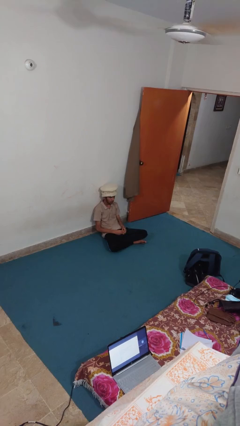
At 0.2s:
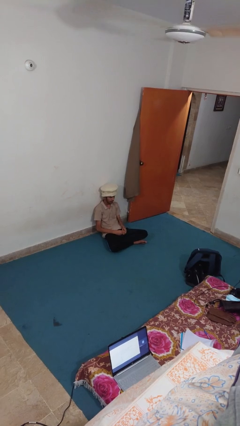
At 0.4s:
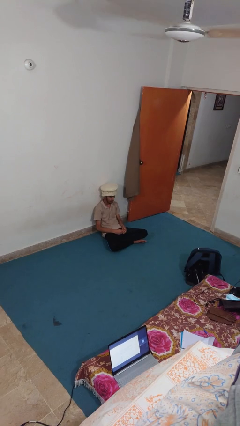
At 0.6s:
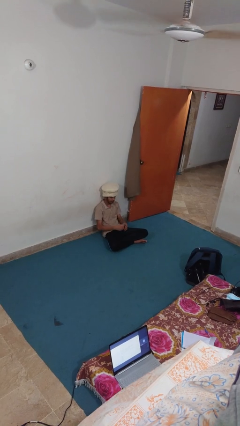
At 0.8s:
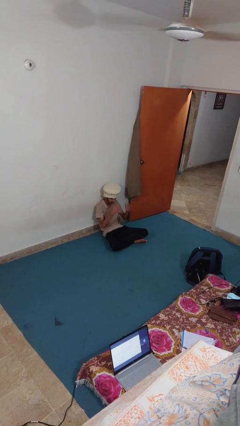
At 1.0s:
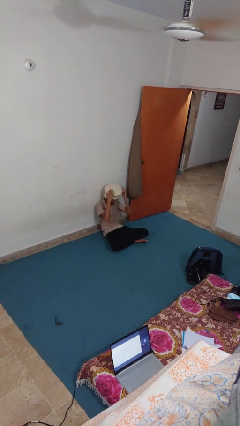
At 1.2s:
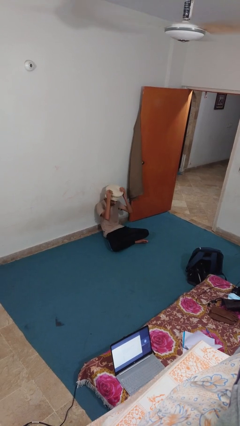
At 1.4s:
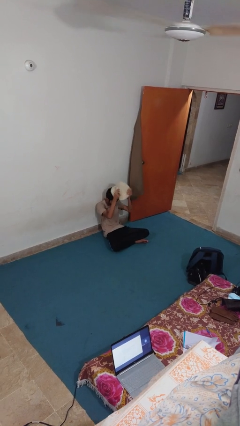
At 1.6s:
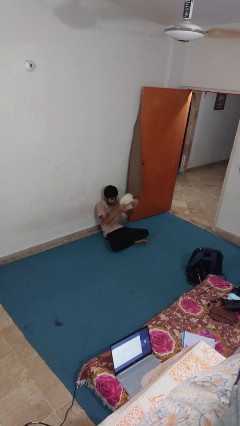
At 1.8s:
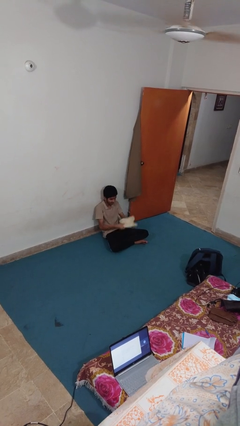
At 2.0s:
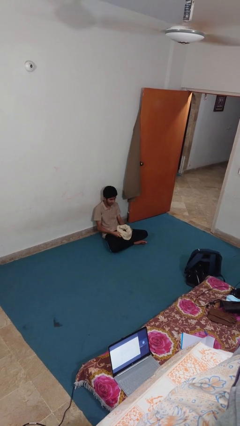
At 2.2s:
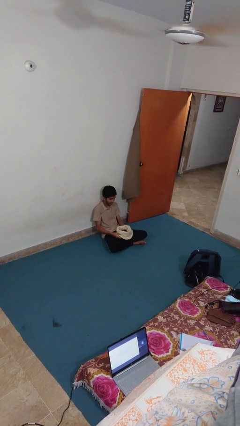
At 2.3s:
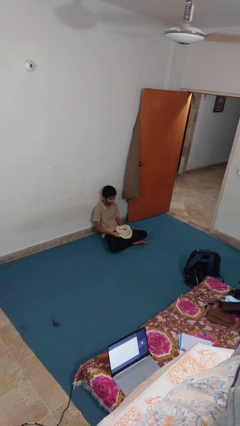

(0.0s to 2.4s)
person takes off hat

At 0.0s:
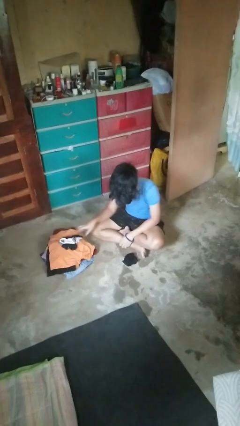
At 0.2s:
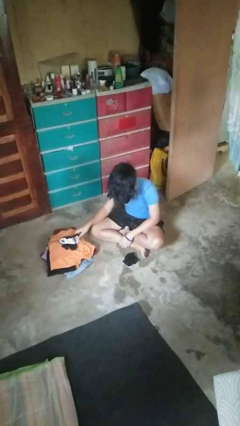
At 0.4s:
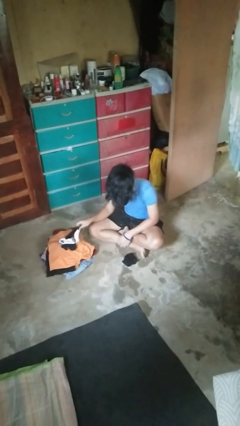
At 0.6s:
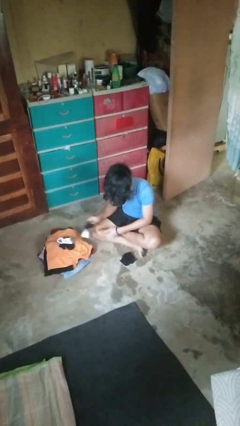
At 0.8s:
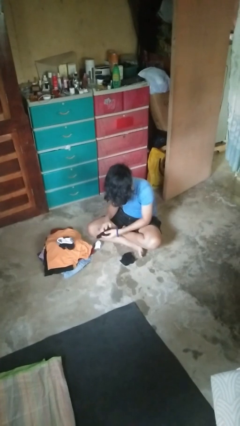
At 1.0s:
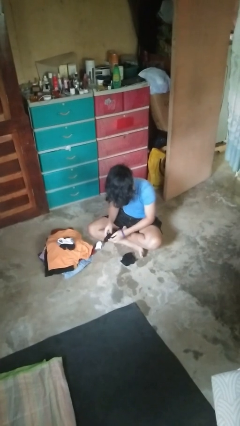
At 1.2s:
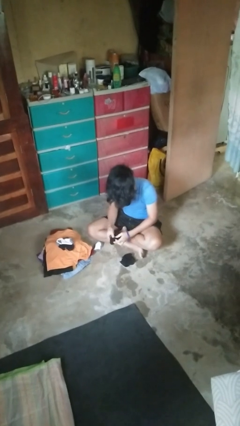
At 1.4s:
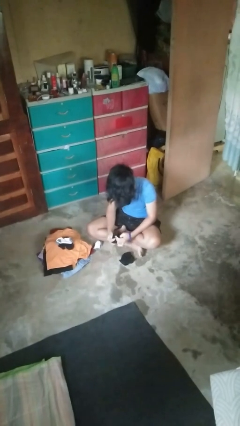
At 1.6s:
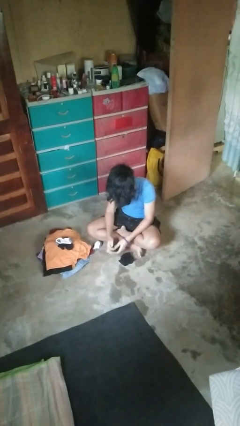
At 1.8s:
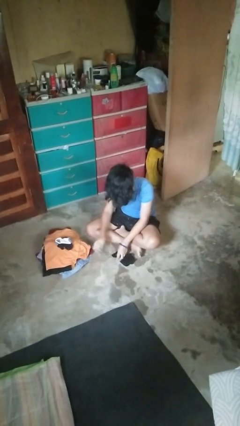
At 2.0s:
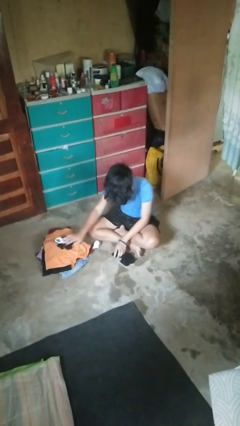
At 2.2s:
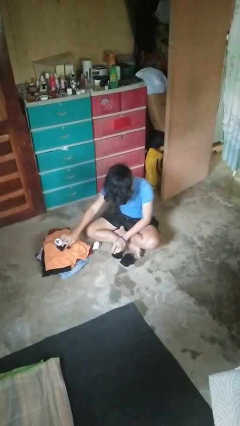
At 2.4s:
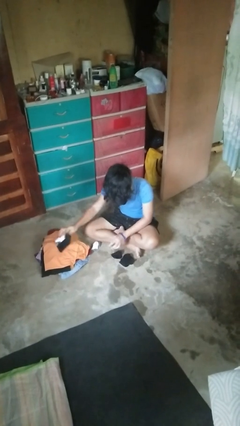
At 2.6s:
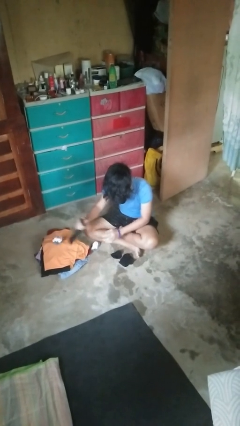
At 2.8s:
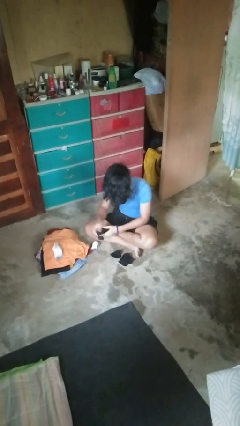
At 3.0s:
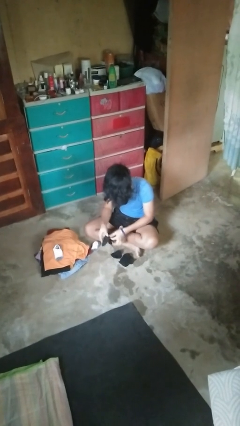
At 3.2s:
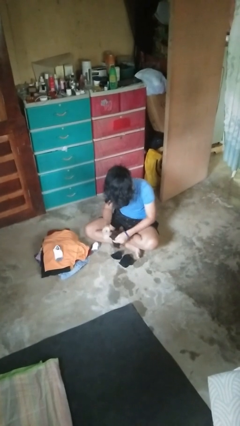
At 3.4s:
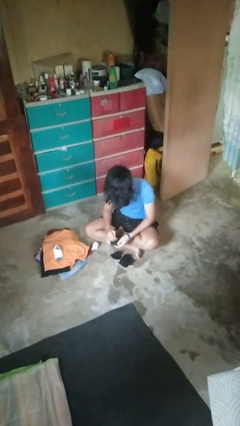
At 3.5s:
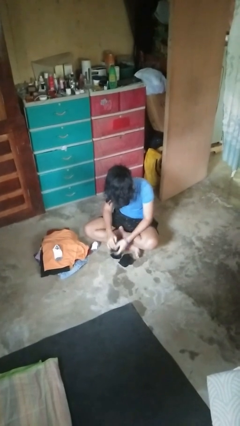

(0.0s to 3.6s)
person folds socks

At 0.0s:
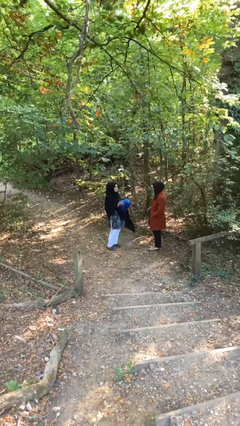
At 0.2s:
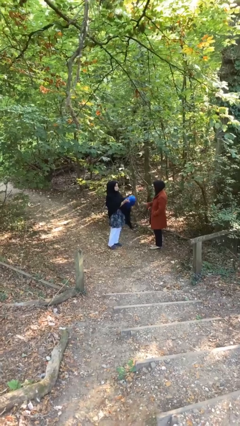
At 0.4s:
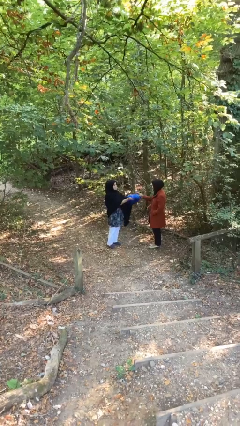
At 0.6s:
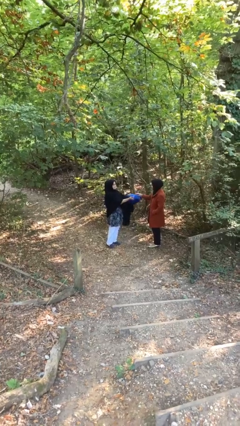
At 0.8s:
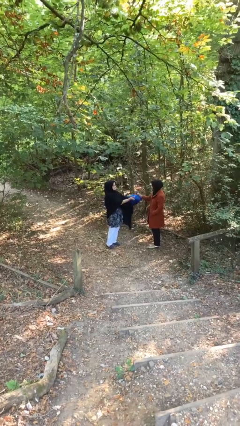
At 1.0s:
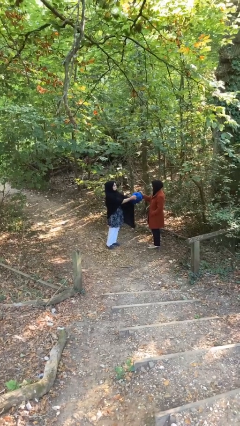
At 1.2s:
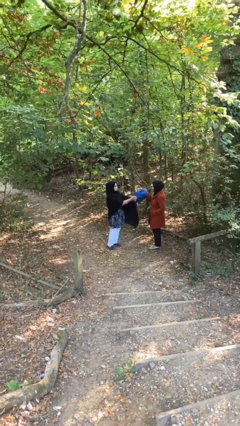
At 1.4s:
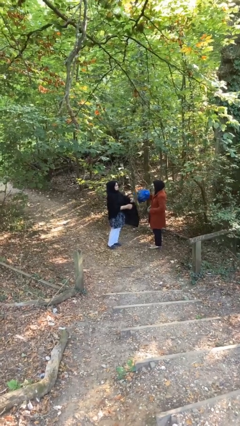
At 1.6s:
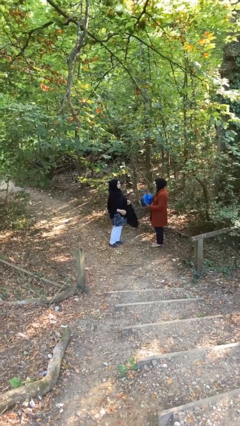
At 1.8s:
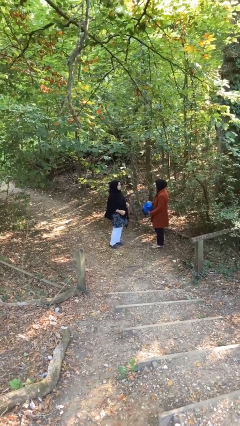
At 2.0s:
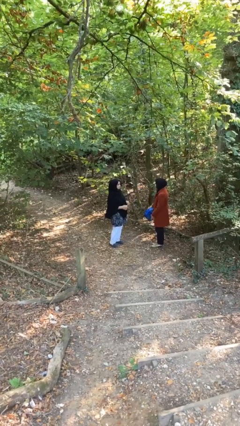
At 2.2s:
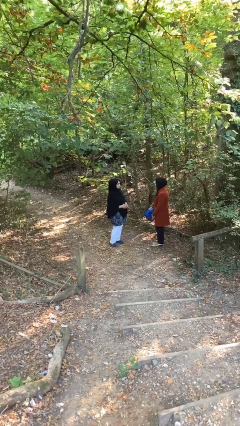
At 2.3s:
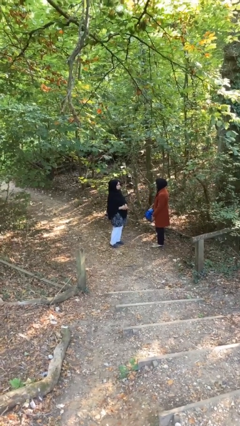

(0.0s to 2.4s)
person transfers object to person

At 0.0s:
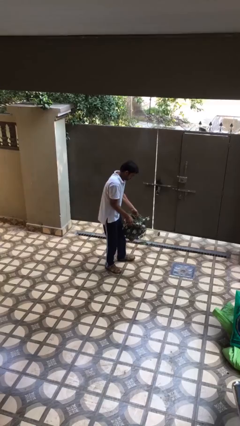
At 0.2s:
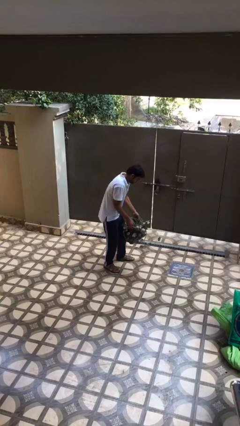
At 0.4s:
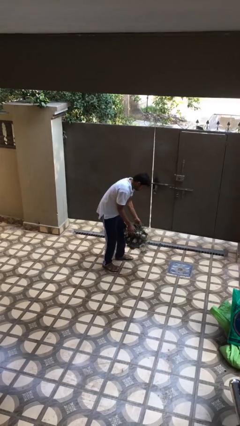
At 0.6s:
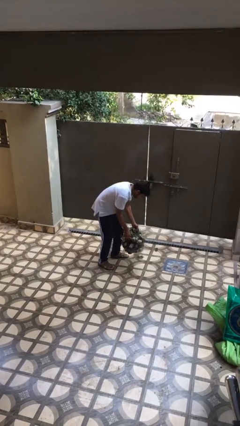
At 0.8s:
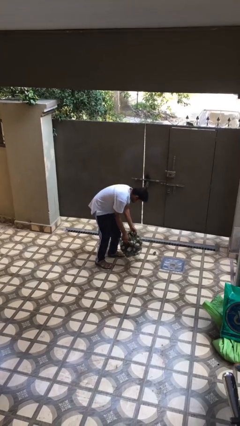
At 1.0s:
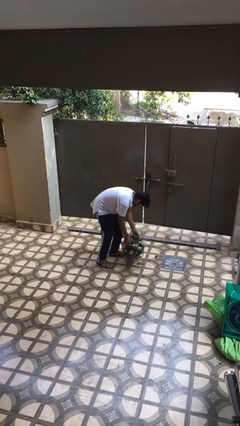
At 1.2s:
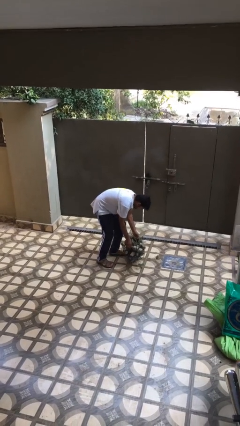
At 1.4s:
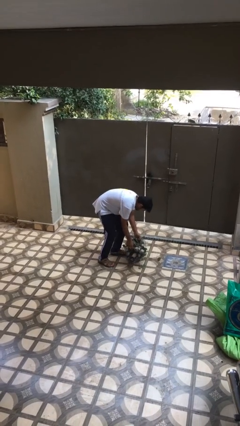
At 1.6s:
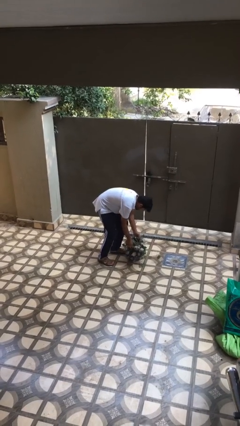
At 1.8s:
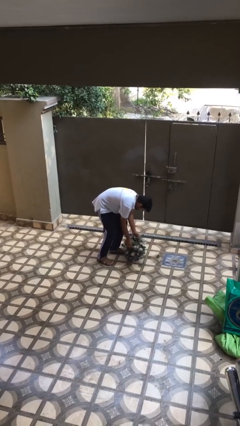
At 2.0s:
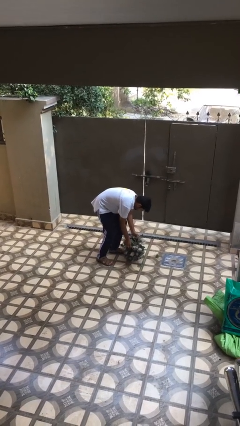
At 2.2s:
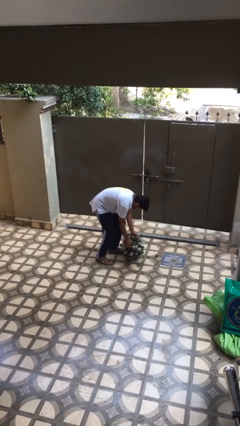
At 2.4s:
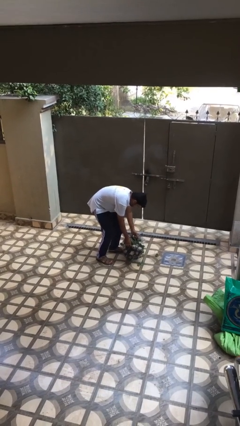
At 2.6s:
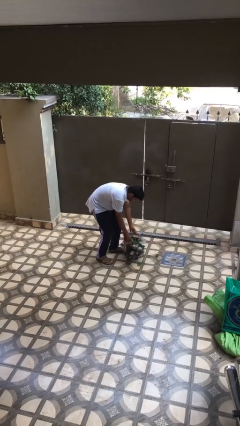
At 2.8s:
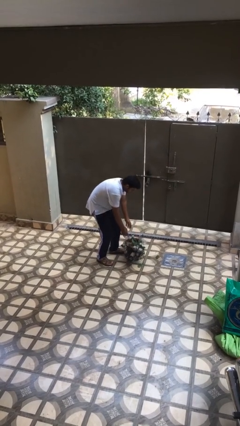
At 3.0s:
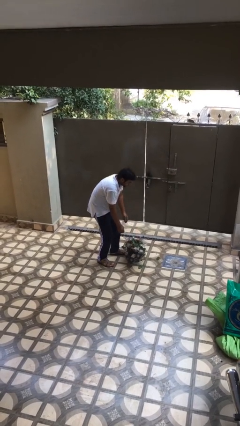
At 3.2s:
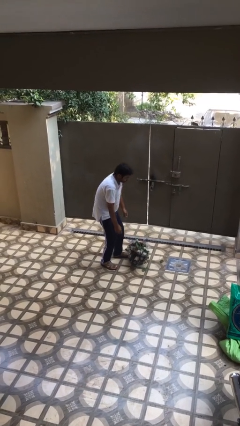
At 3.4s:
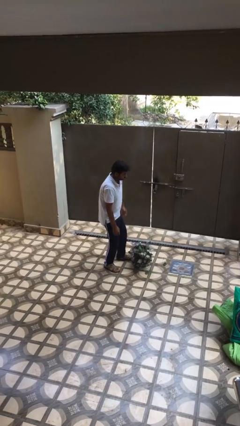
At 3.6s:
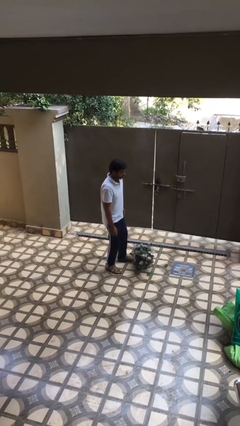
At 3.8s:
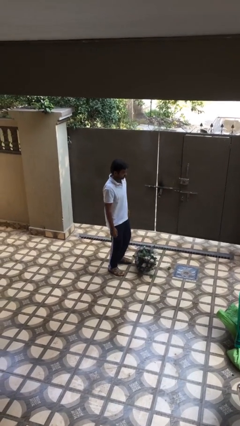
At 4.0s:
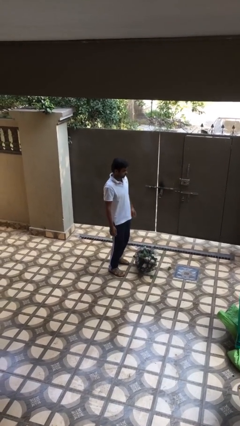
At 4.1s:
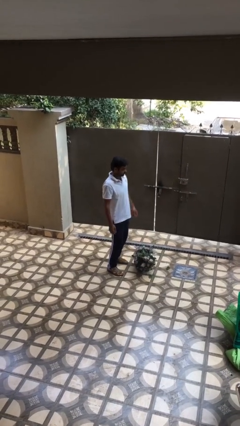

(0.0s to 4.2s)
person puts down object on floor

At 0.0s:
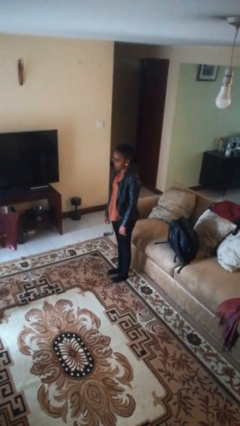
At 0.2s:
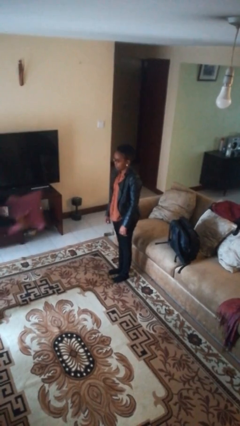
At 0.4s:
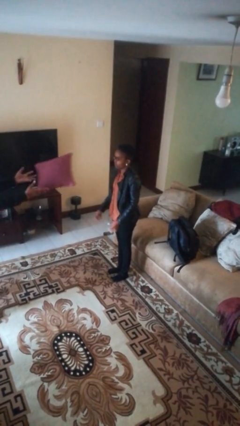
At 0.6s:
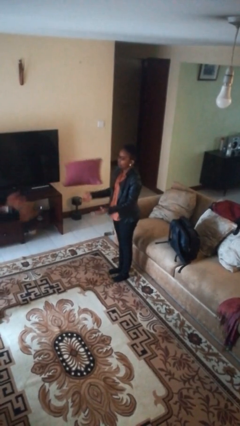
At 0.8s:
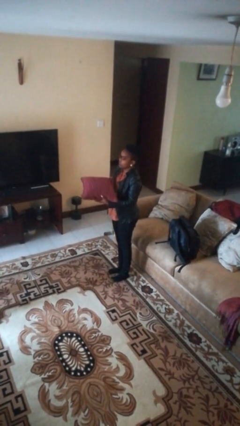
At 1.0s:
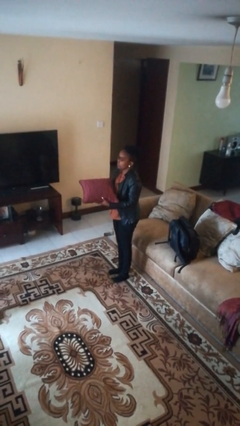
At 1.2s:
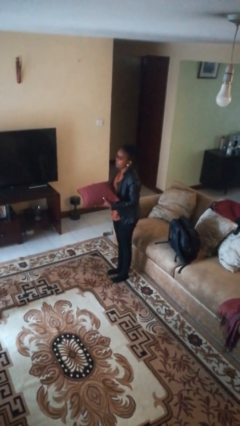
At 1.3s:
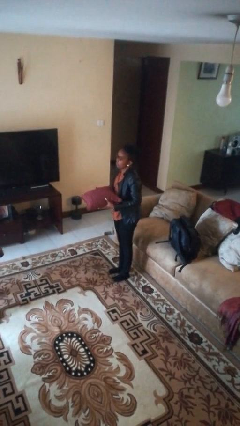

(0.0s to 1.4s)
person catches object from person

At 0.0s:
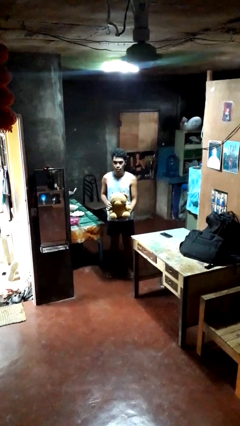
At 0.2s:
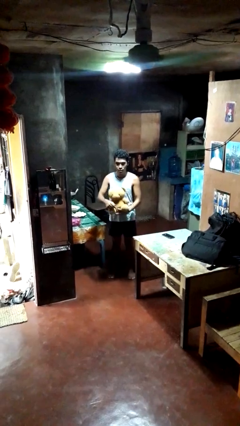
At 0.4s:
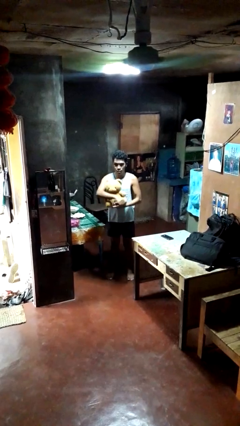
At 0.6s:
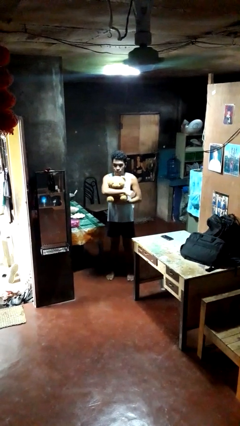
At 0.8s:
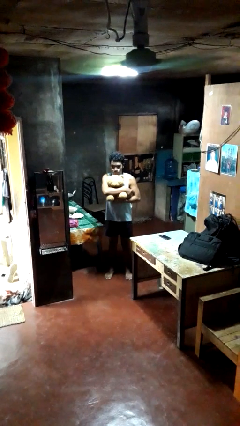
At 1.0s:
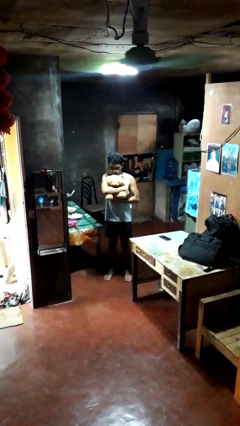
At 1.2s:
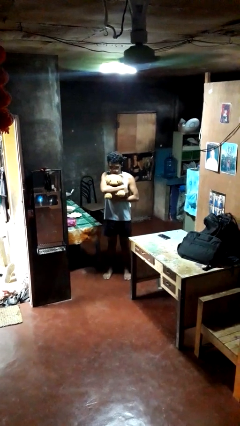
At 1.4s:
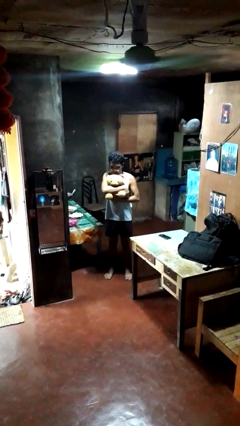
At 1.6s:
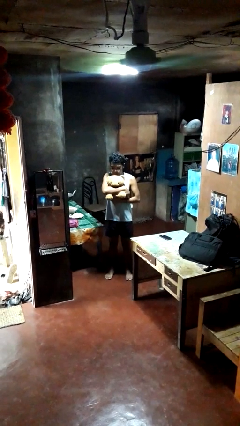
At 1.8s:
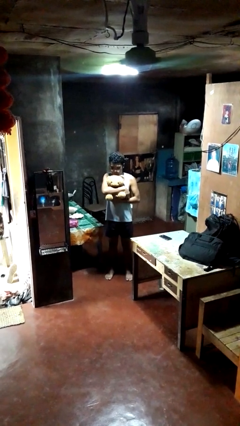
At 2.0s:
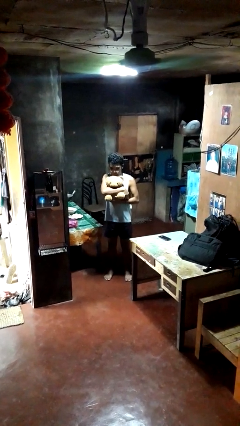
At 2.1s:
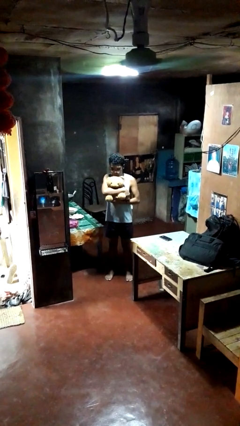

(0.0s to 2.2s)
person hugs stuffed animal

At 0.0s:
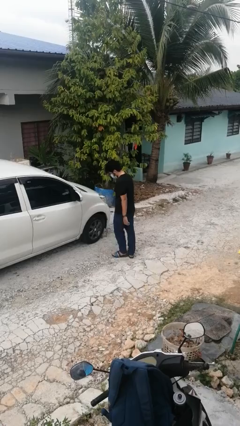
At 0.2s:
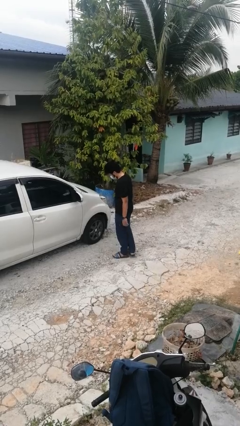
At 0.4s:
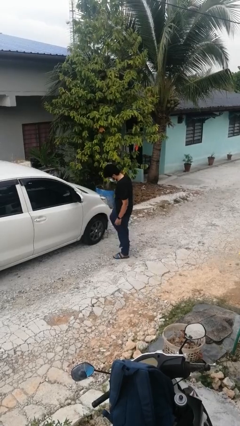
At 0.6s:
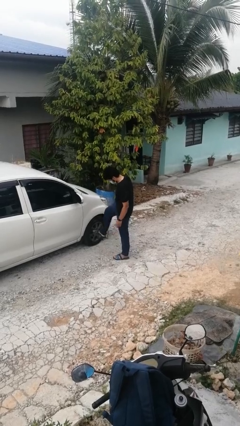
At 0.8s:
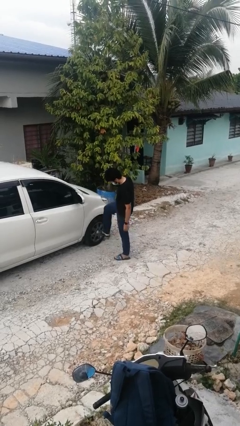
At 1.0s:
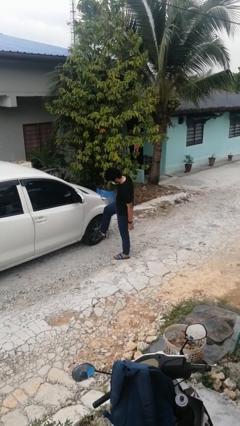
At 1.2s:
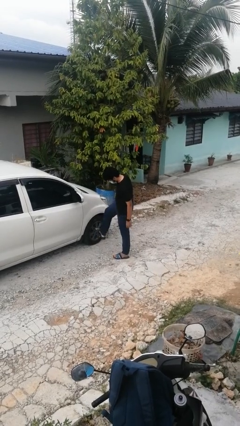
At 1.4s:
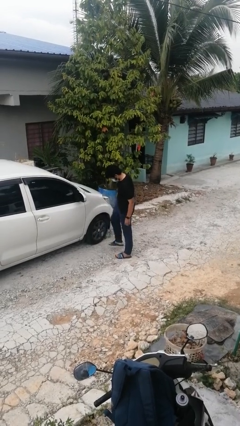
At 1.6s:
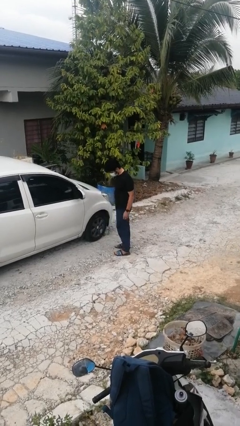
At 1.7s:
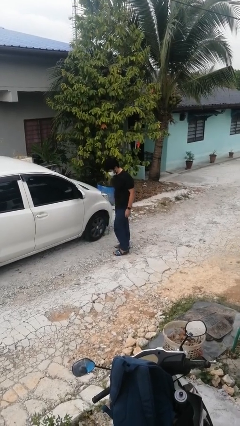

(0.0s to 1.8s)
person kicks car tires
